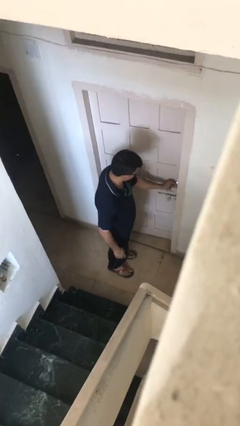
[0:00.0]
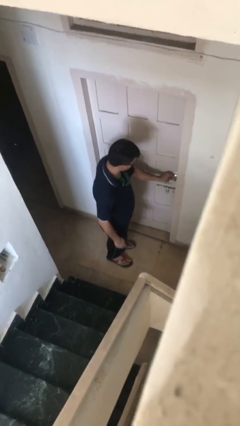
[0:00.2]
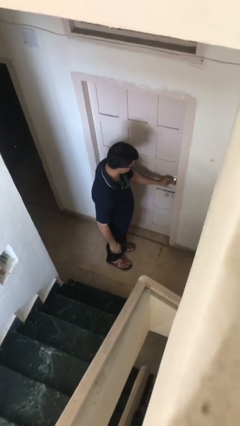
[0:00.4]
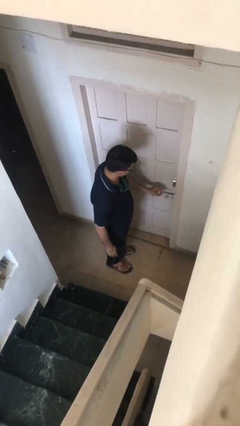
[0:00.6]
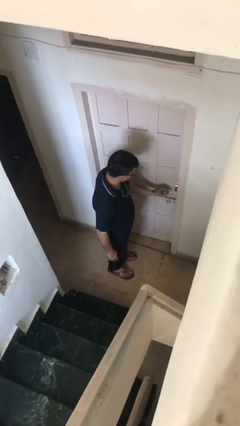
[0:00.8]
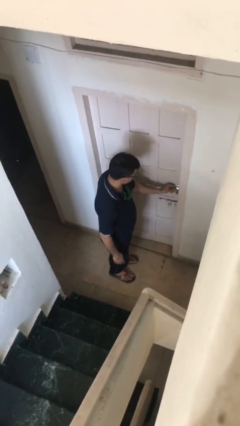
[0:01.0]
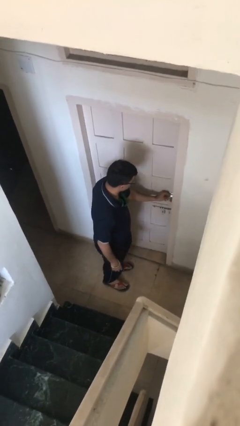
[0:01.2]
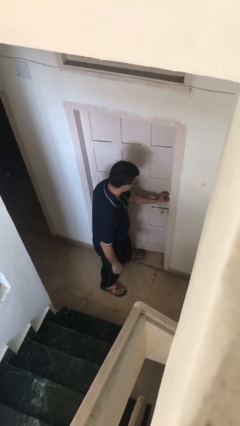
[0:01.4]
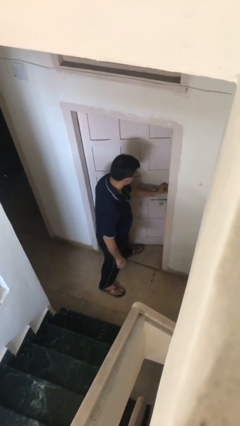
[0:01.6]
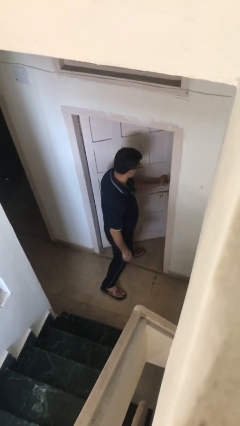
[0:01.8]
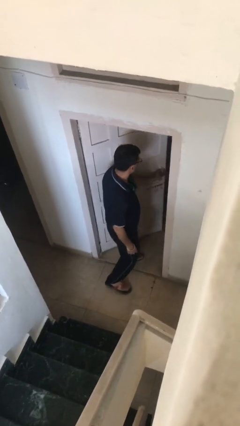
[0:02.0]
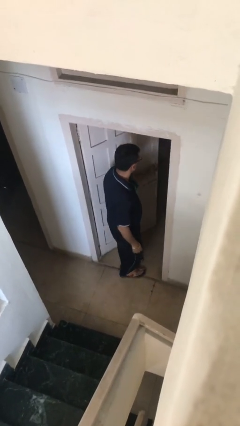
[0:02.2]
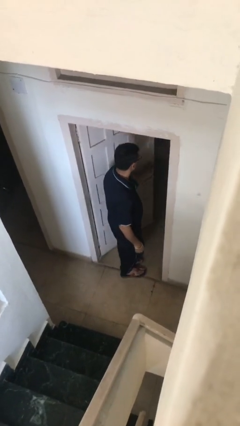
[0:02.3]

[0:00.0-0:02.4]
person opens facility door

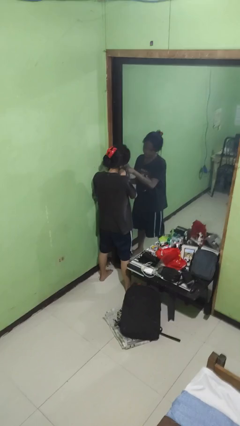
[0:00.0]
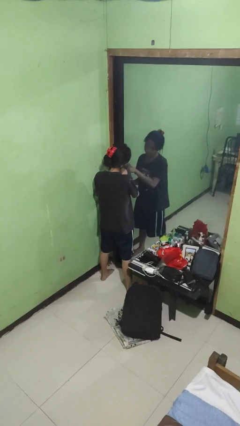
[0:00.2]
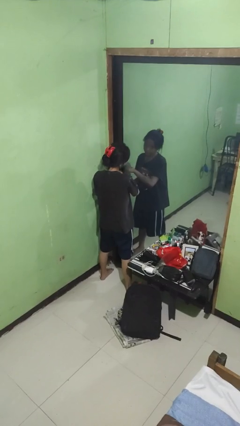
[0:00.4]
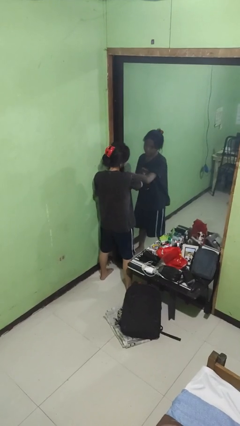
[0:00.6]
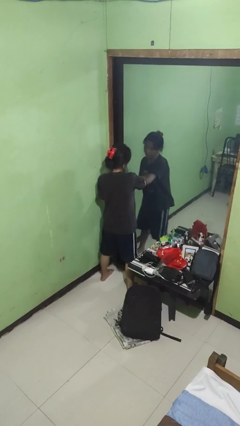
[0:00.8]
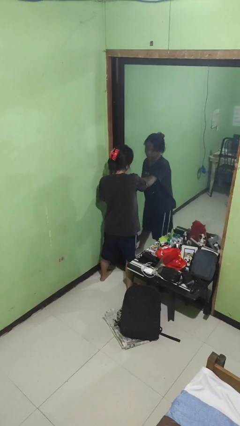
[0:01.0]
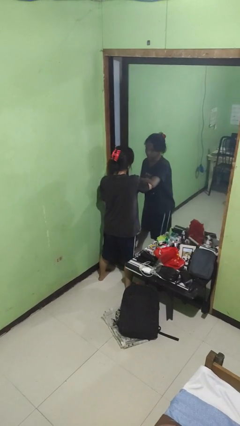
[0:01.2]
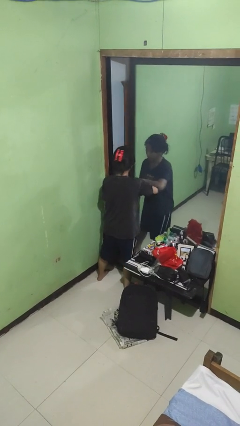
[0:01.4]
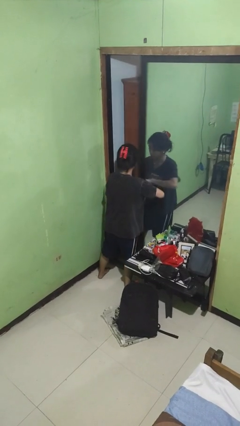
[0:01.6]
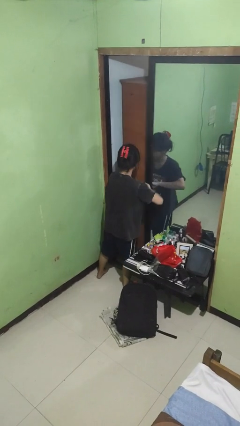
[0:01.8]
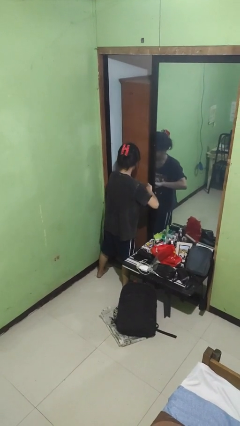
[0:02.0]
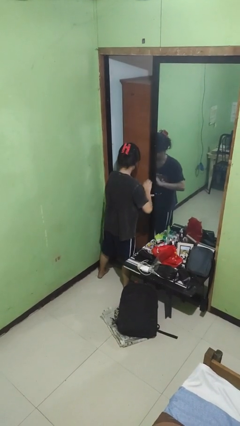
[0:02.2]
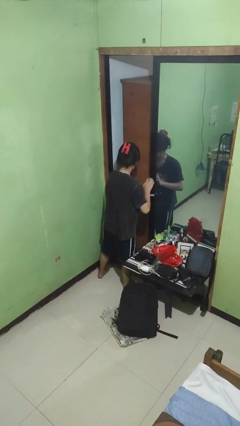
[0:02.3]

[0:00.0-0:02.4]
person opens sliding door

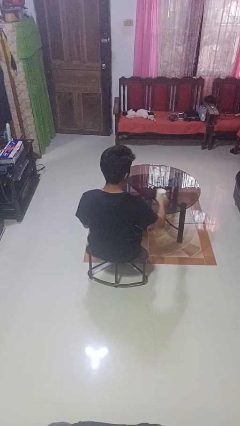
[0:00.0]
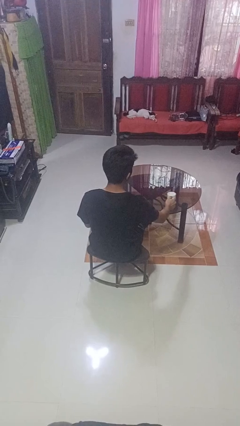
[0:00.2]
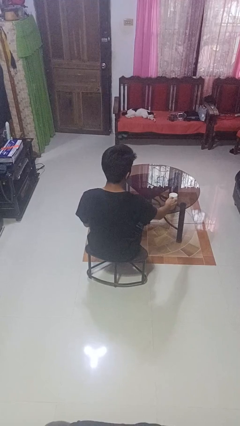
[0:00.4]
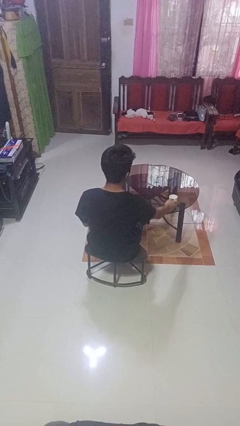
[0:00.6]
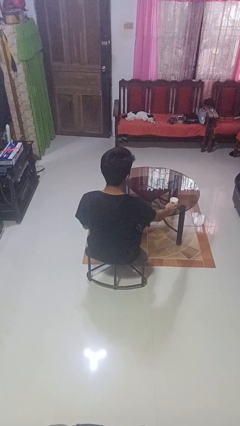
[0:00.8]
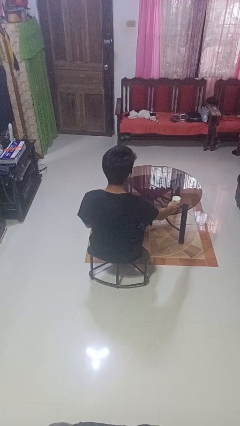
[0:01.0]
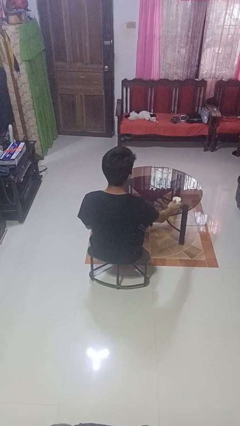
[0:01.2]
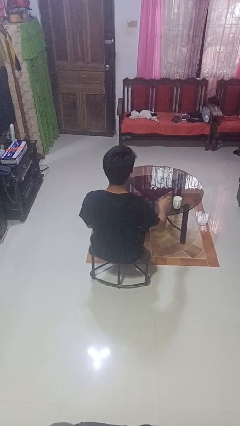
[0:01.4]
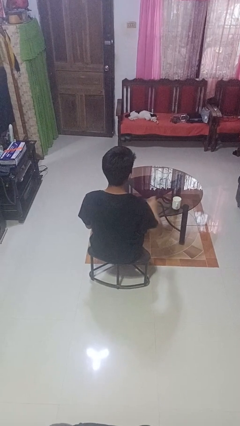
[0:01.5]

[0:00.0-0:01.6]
person puts down object on table

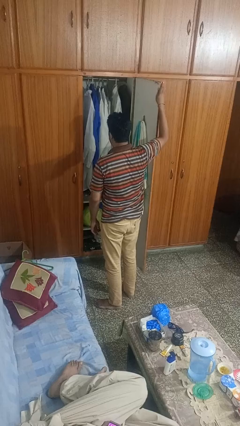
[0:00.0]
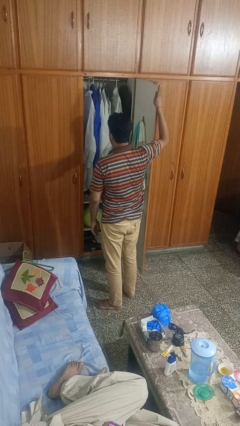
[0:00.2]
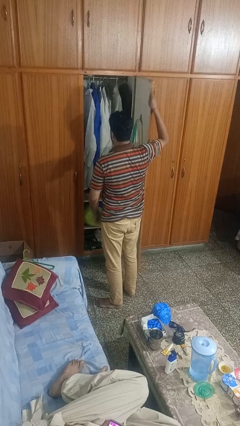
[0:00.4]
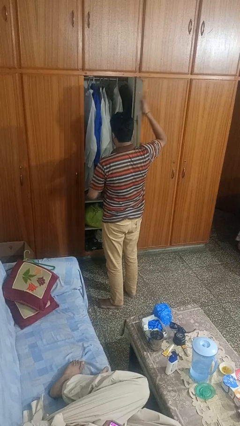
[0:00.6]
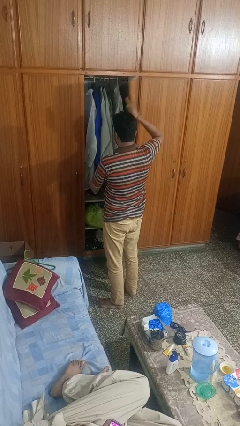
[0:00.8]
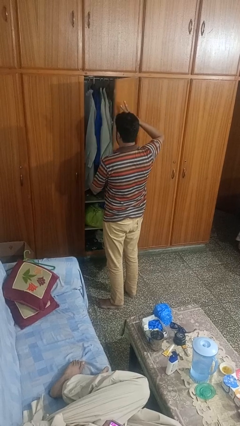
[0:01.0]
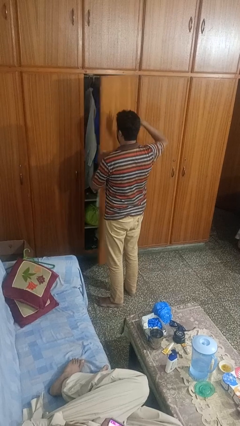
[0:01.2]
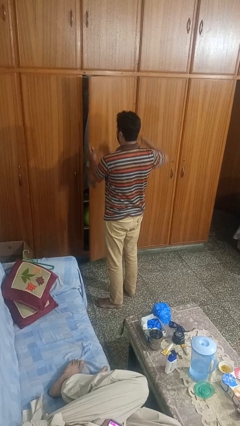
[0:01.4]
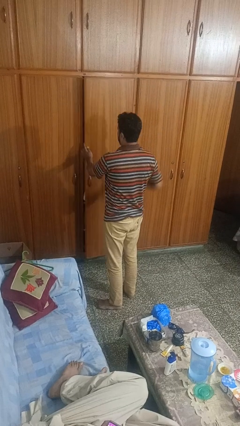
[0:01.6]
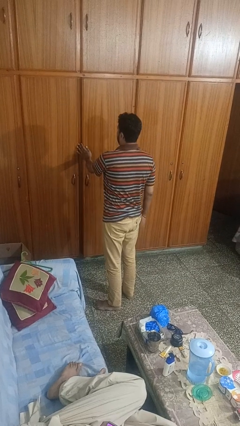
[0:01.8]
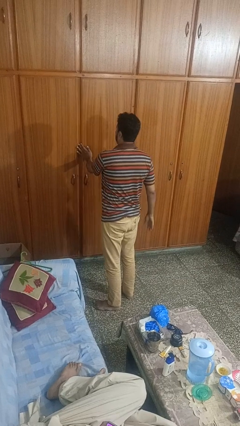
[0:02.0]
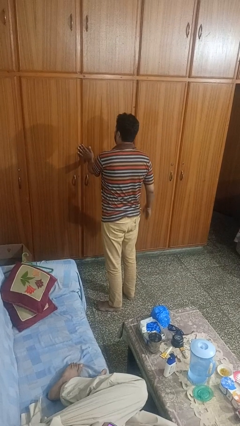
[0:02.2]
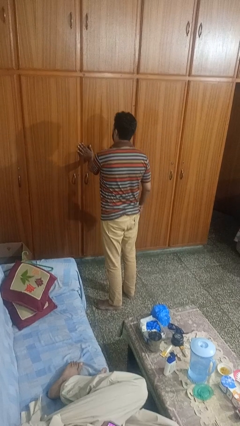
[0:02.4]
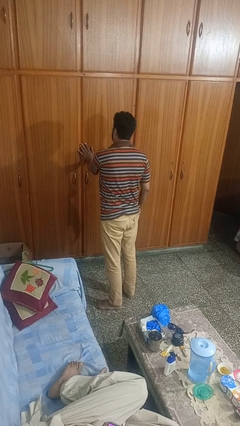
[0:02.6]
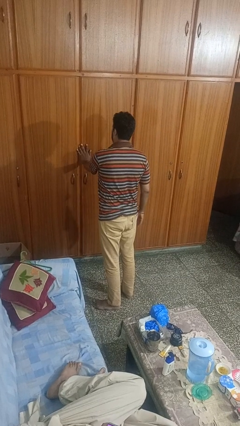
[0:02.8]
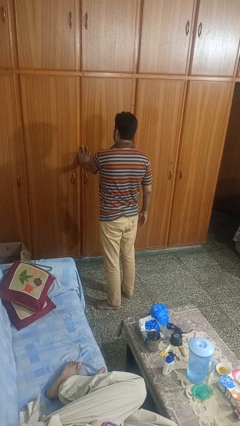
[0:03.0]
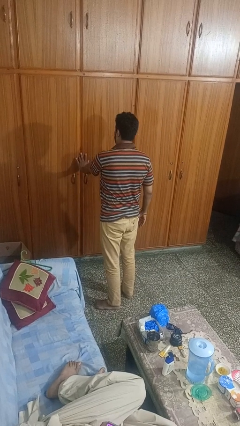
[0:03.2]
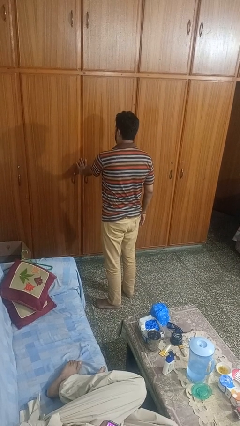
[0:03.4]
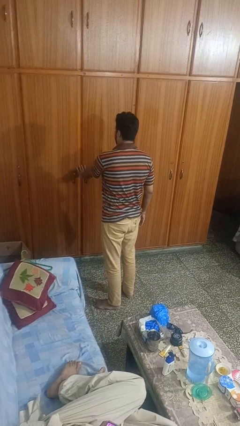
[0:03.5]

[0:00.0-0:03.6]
person closes closet door

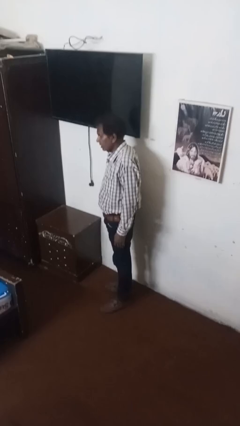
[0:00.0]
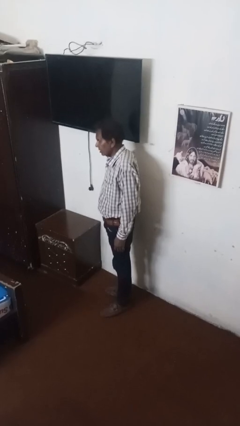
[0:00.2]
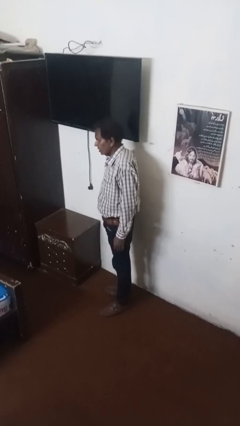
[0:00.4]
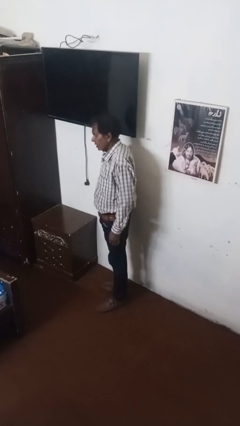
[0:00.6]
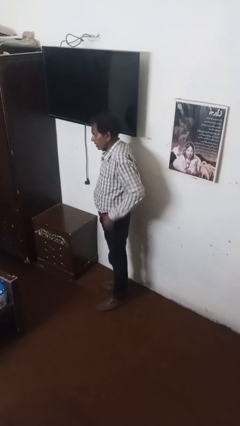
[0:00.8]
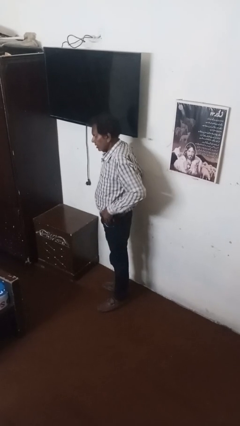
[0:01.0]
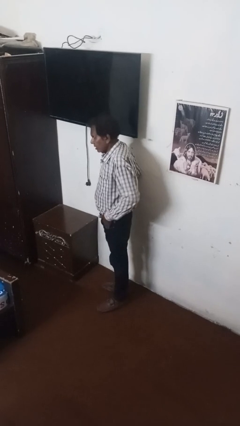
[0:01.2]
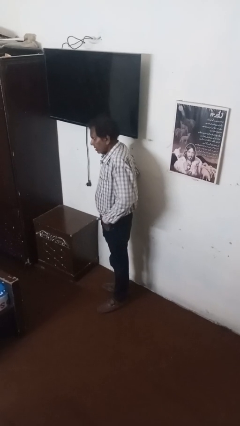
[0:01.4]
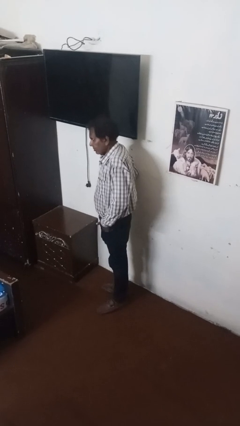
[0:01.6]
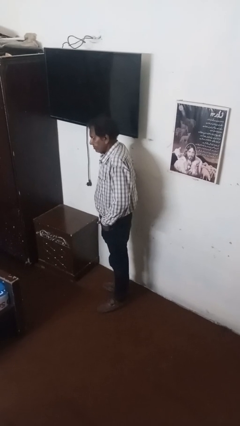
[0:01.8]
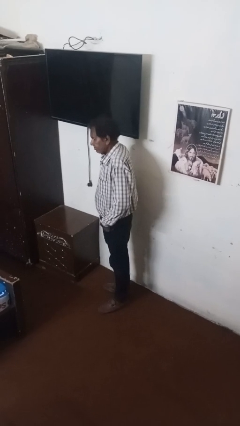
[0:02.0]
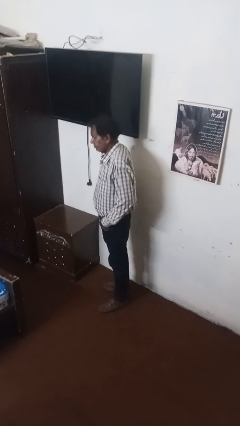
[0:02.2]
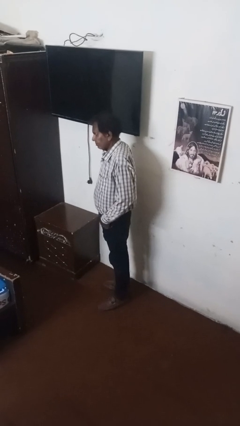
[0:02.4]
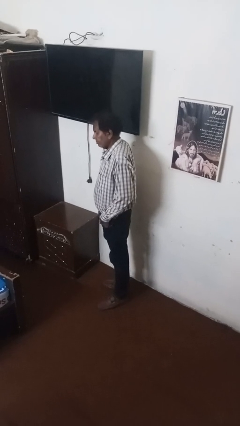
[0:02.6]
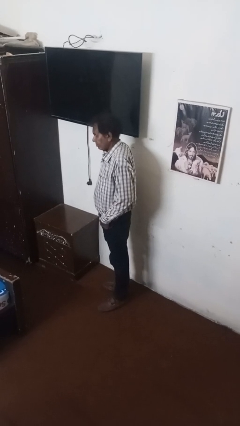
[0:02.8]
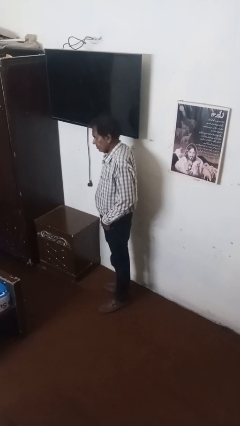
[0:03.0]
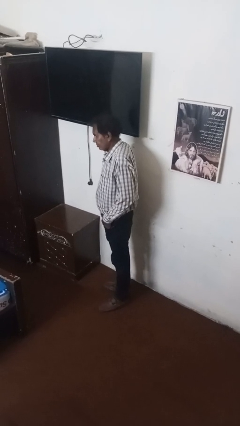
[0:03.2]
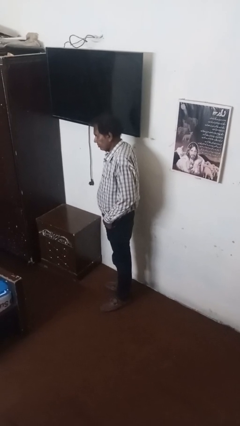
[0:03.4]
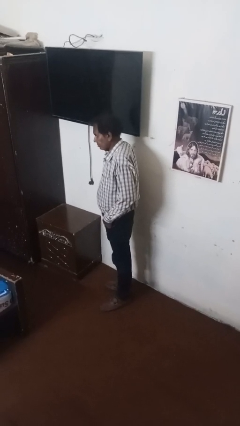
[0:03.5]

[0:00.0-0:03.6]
person puts hands in back pockets

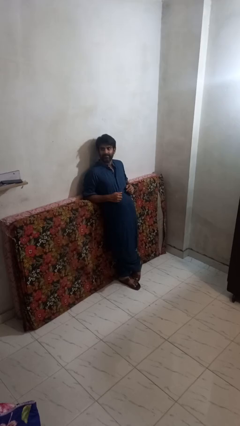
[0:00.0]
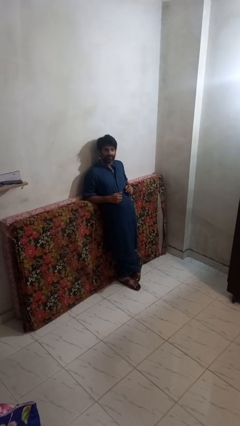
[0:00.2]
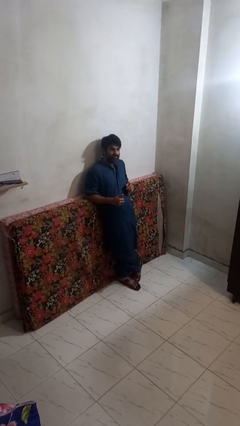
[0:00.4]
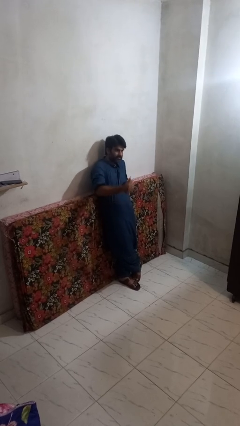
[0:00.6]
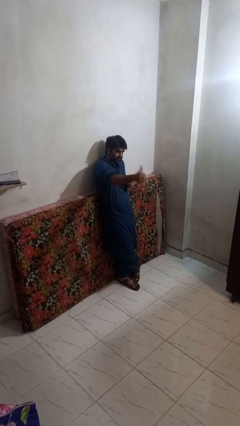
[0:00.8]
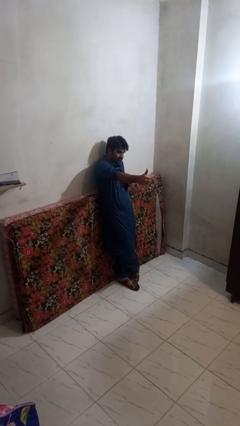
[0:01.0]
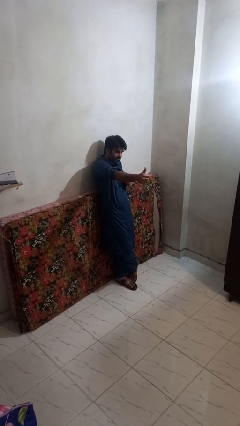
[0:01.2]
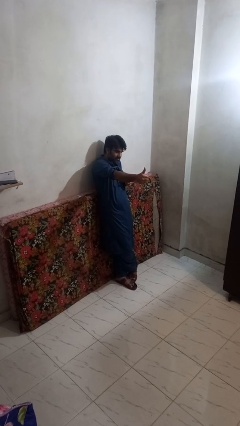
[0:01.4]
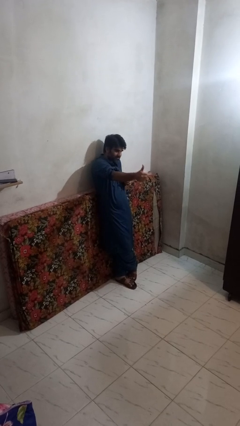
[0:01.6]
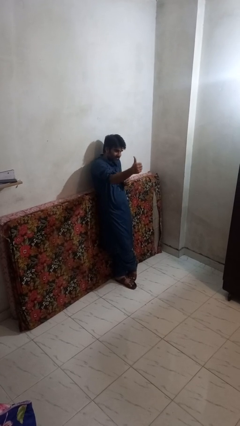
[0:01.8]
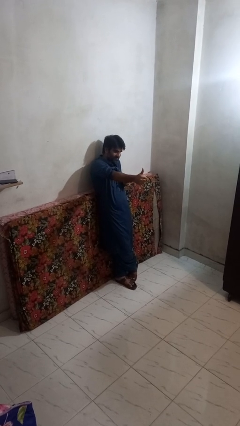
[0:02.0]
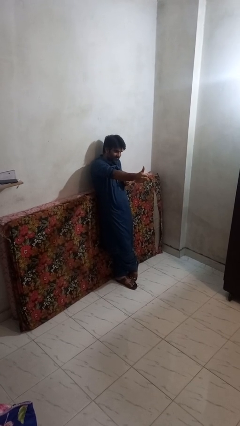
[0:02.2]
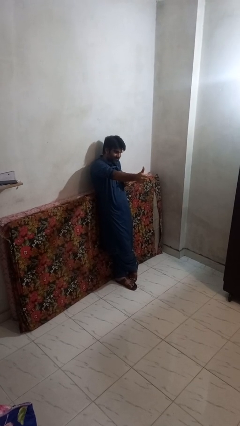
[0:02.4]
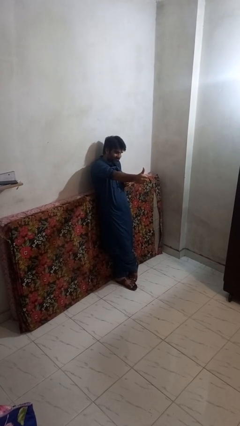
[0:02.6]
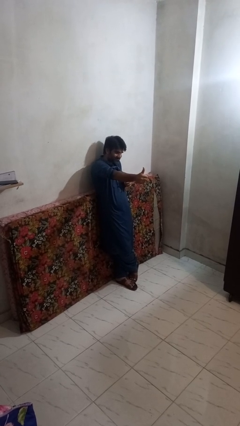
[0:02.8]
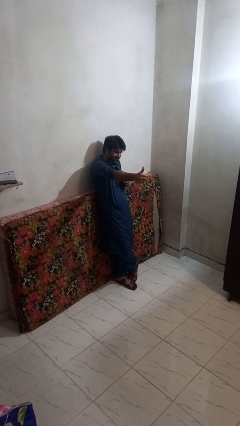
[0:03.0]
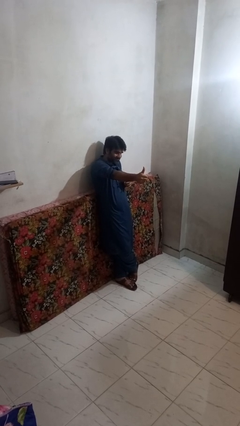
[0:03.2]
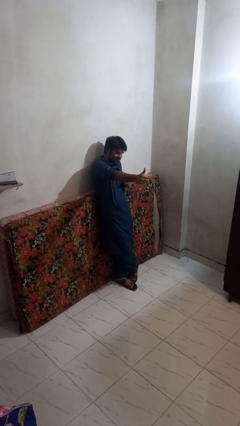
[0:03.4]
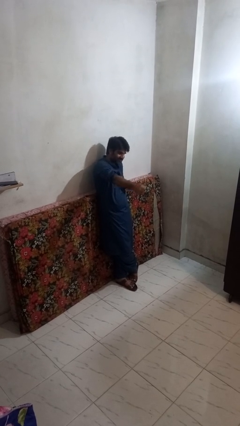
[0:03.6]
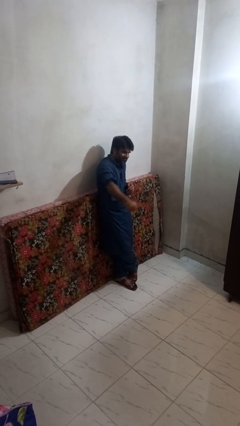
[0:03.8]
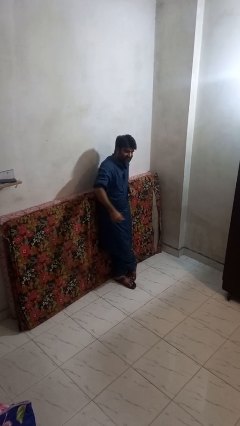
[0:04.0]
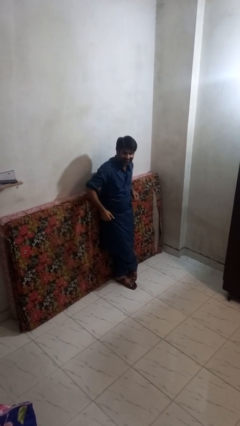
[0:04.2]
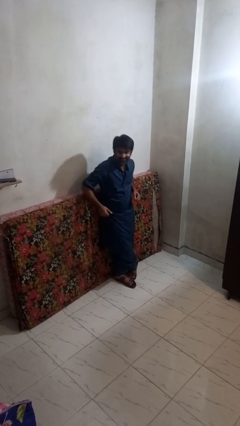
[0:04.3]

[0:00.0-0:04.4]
person gestures thumbs up
